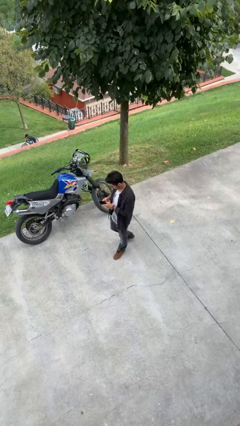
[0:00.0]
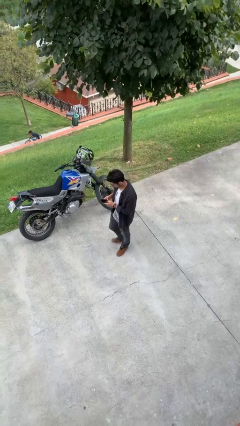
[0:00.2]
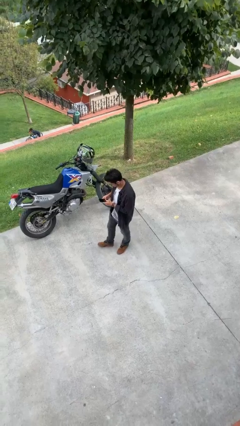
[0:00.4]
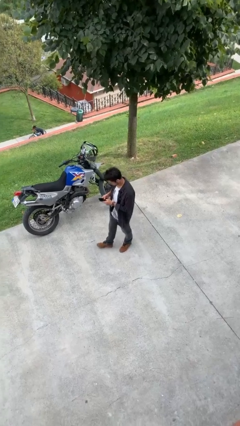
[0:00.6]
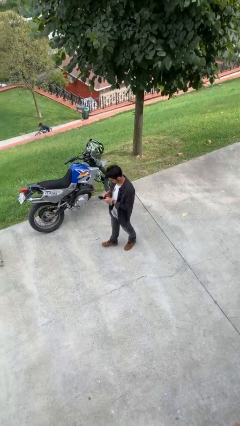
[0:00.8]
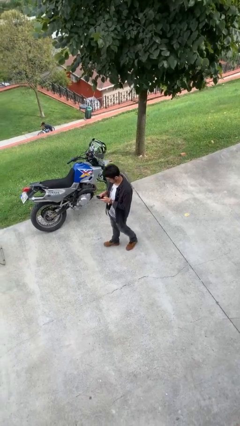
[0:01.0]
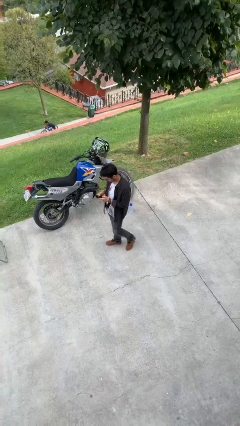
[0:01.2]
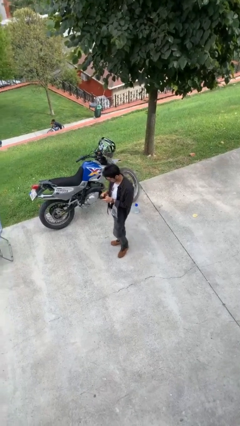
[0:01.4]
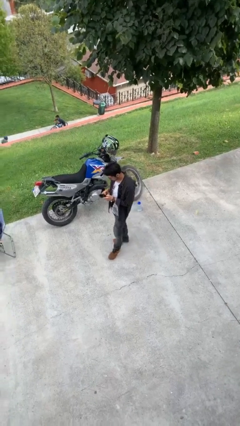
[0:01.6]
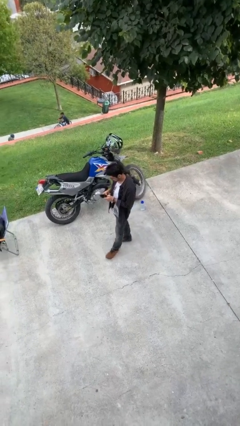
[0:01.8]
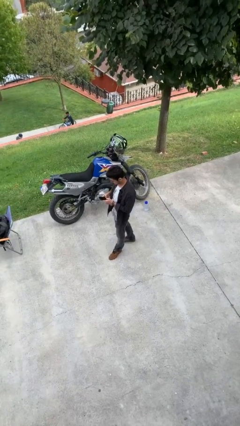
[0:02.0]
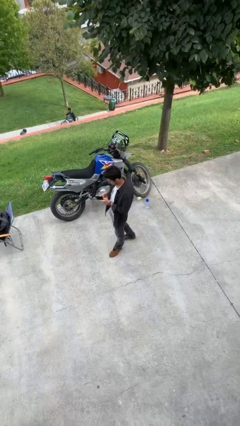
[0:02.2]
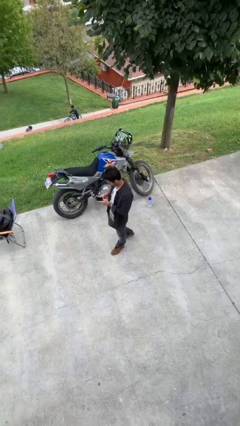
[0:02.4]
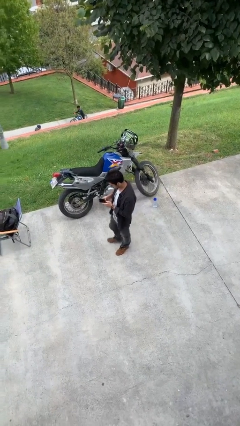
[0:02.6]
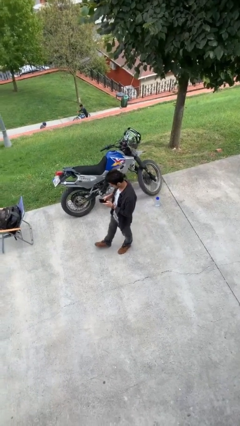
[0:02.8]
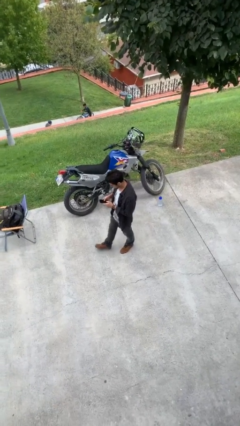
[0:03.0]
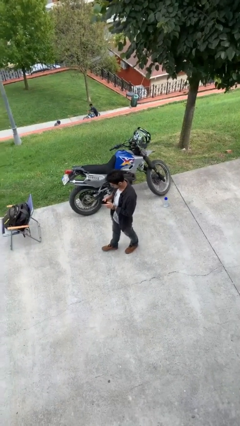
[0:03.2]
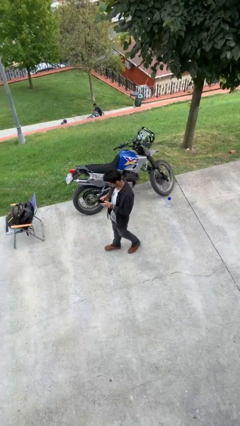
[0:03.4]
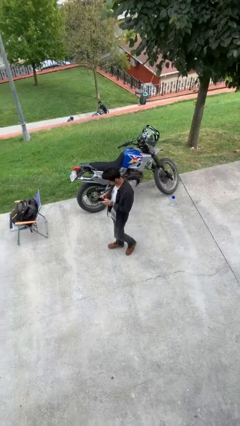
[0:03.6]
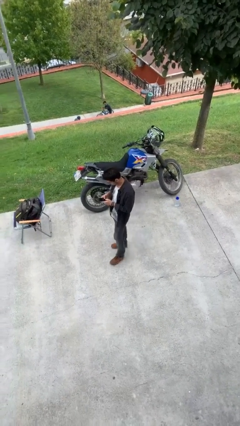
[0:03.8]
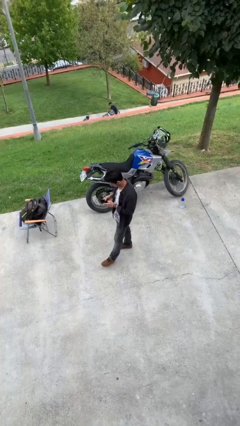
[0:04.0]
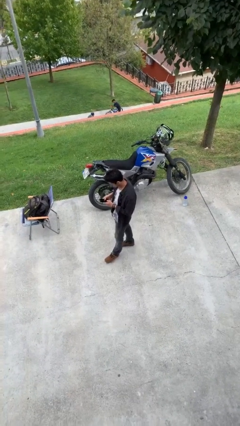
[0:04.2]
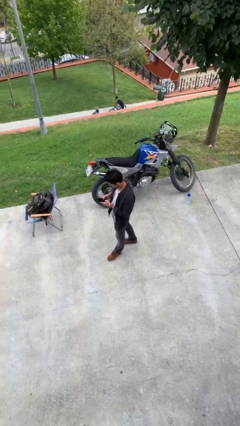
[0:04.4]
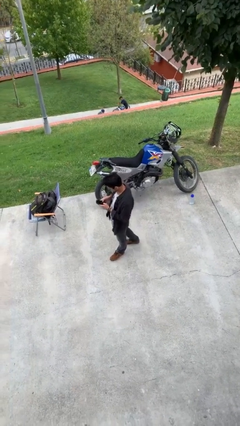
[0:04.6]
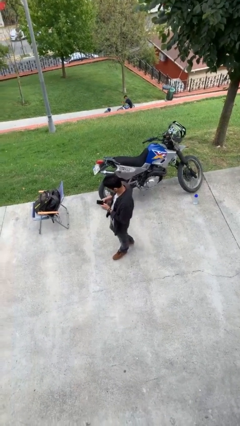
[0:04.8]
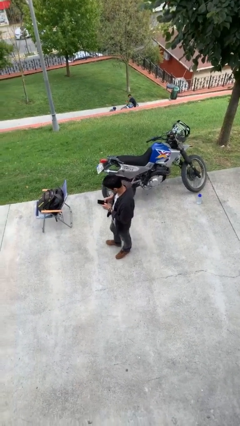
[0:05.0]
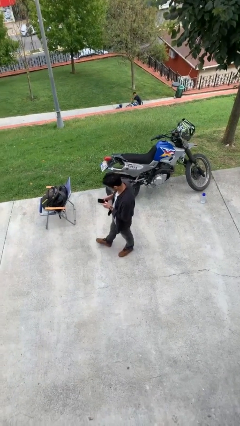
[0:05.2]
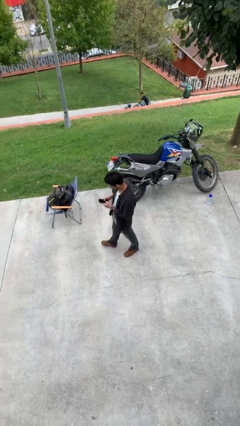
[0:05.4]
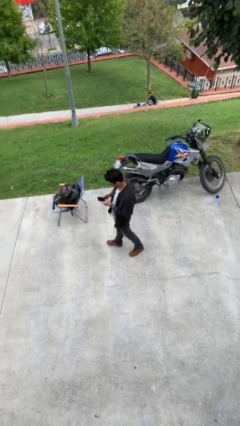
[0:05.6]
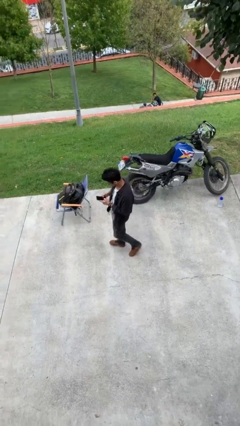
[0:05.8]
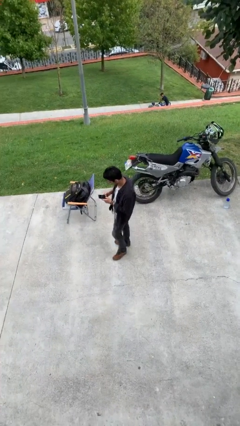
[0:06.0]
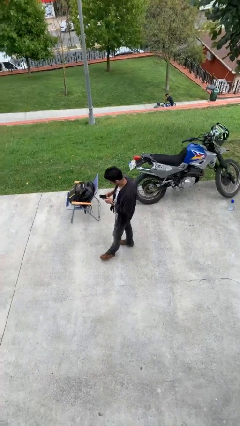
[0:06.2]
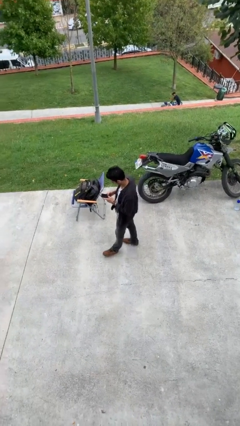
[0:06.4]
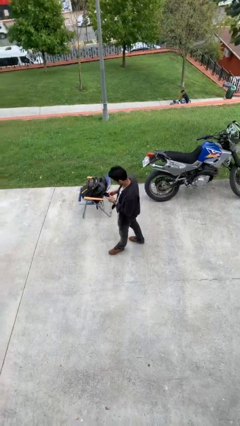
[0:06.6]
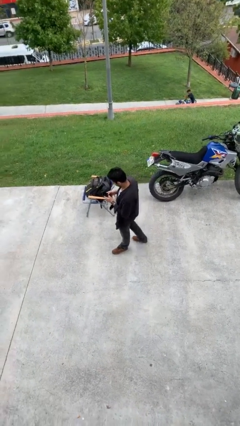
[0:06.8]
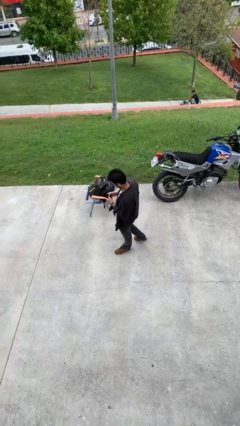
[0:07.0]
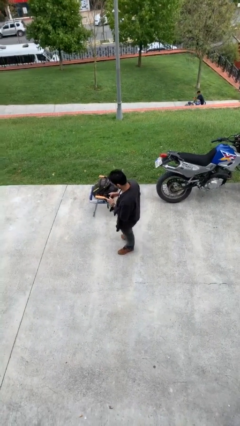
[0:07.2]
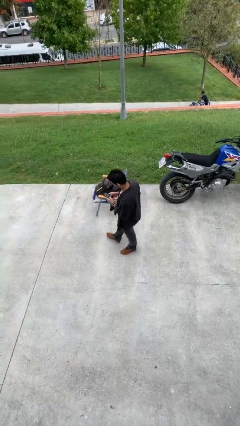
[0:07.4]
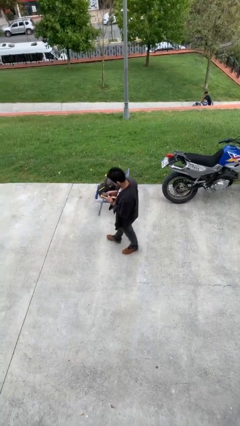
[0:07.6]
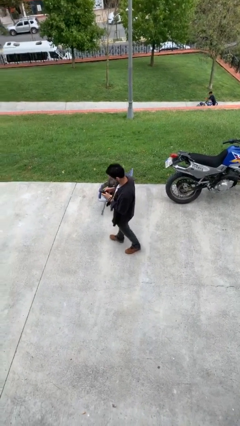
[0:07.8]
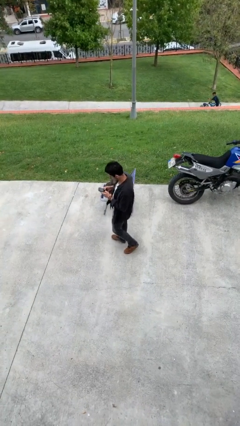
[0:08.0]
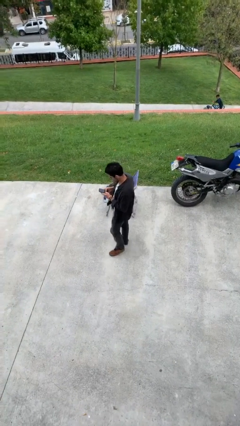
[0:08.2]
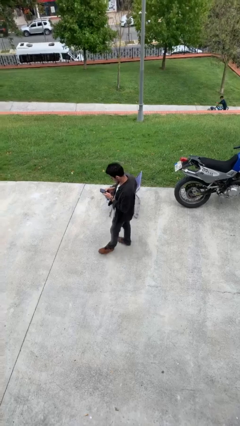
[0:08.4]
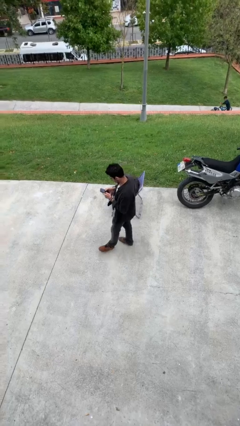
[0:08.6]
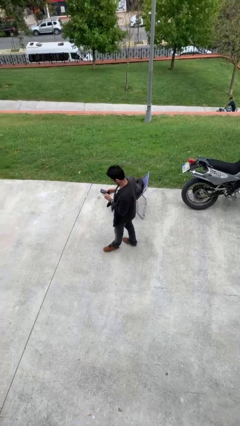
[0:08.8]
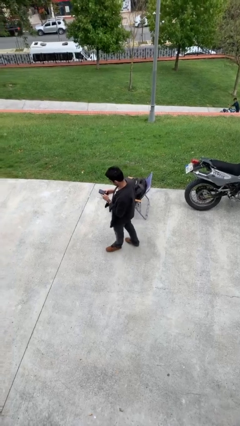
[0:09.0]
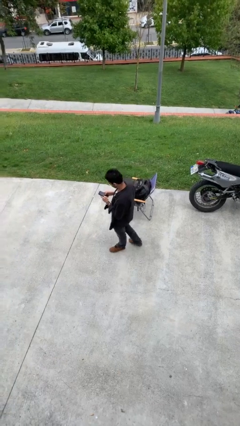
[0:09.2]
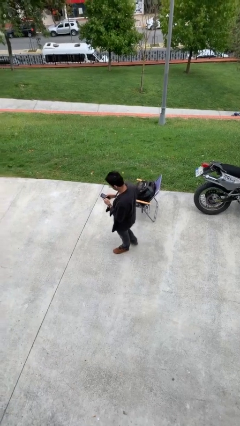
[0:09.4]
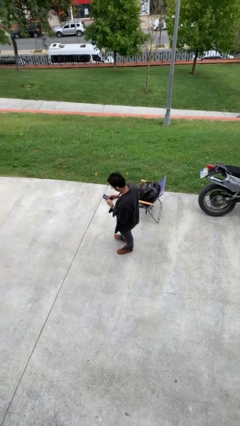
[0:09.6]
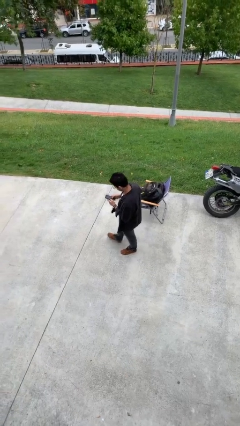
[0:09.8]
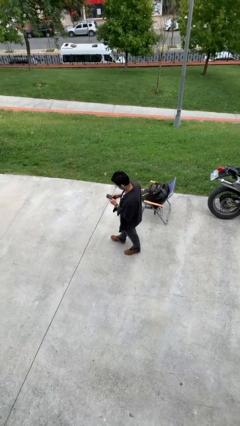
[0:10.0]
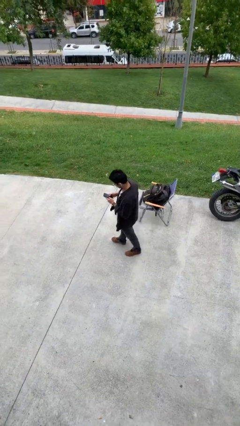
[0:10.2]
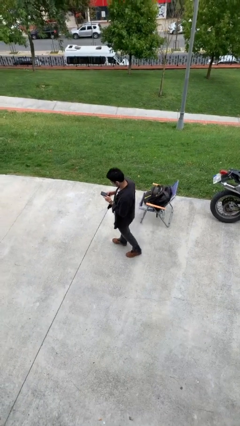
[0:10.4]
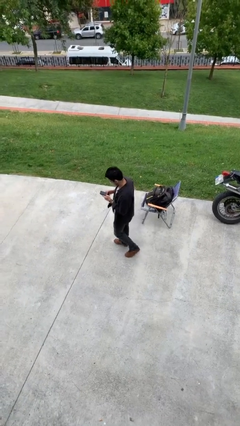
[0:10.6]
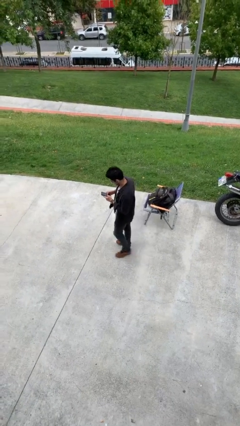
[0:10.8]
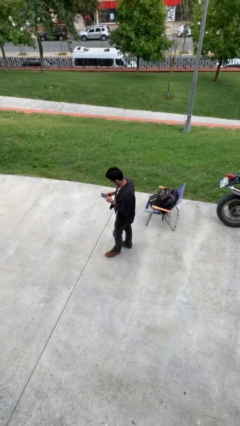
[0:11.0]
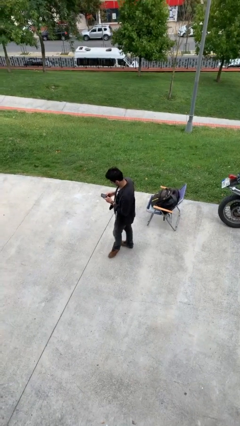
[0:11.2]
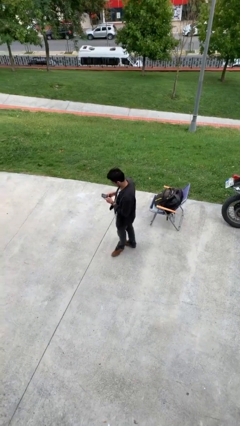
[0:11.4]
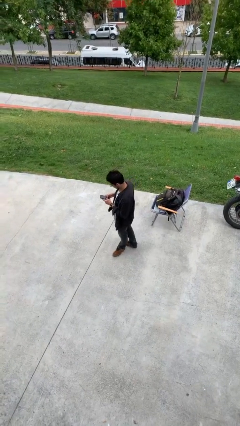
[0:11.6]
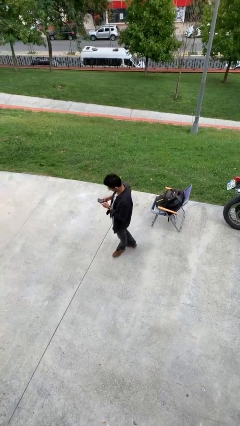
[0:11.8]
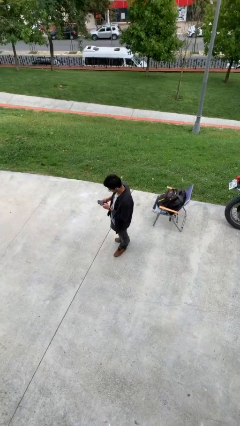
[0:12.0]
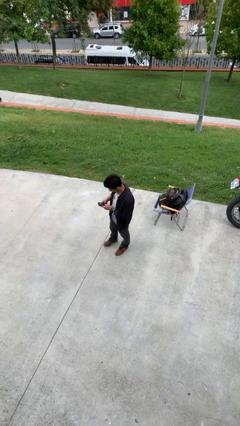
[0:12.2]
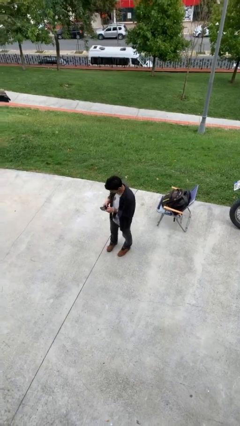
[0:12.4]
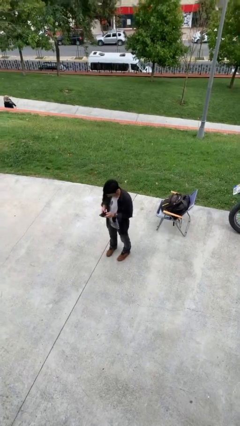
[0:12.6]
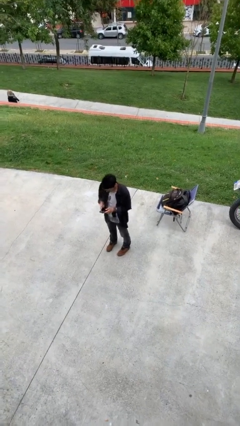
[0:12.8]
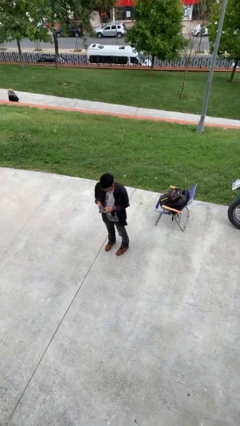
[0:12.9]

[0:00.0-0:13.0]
person texts on phone

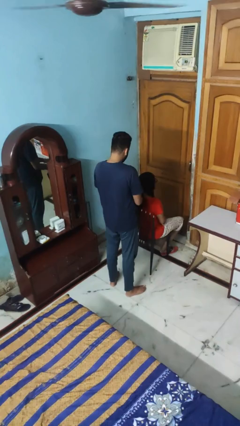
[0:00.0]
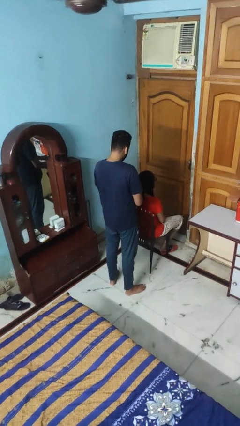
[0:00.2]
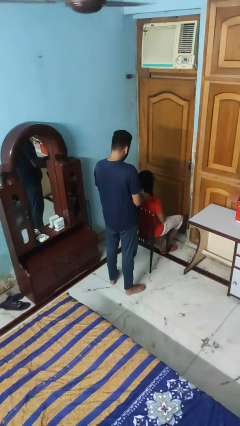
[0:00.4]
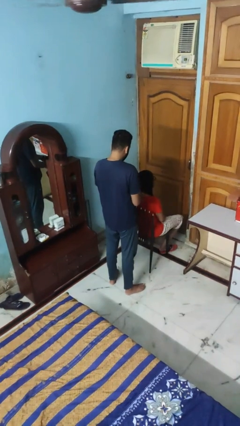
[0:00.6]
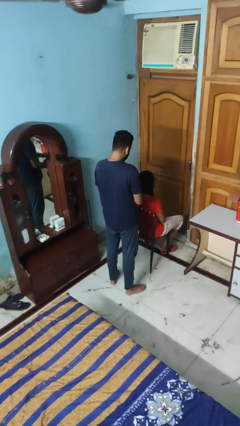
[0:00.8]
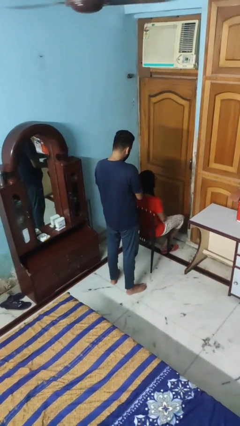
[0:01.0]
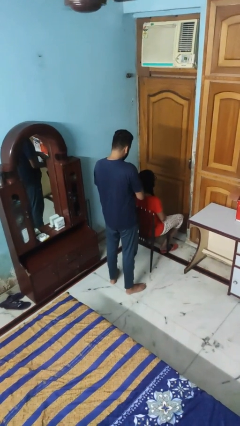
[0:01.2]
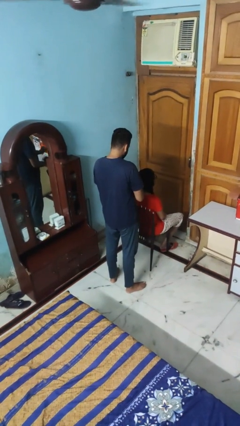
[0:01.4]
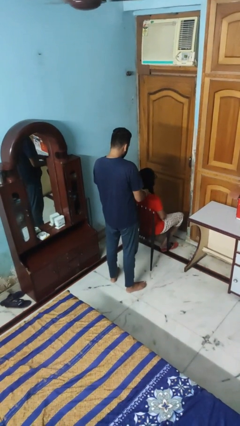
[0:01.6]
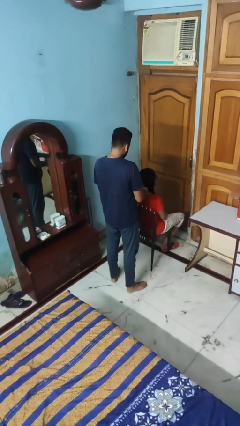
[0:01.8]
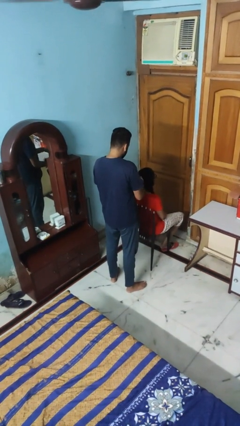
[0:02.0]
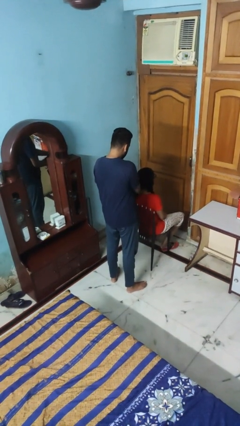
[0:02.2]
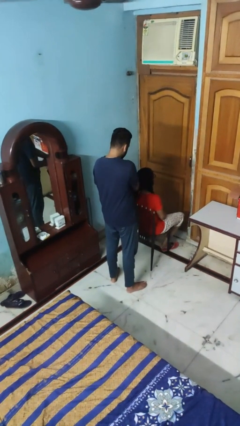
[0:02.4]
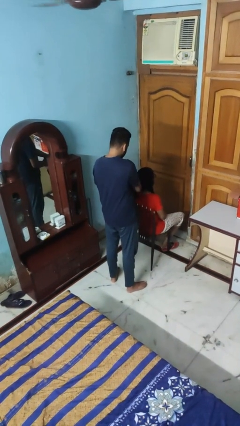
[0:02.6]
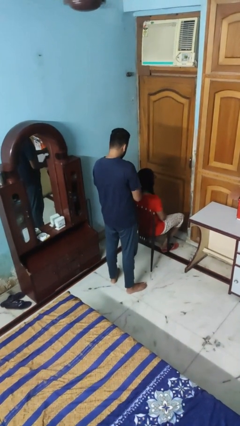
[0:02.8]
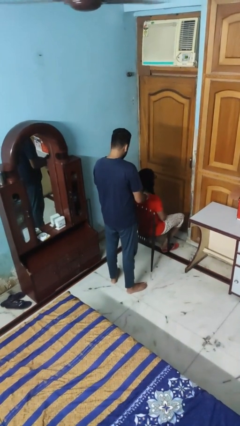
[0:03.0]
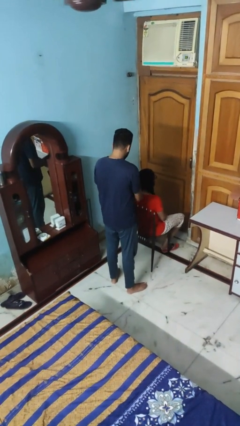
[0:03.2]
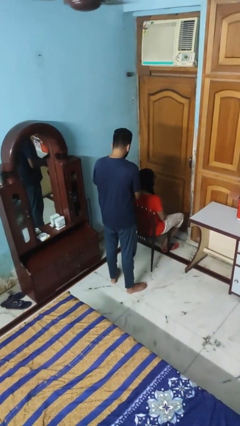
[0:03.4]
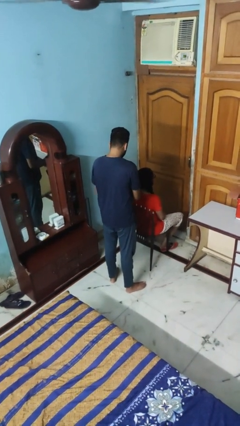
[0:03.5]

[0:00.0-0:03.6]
person braids hair of person

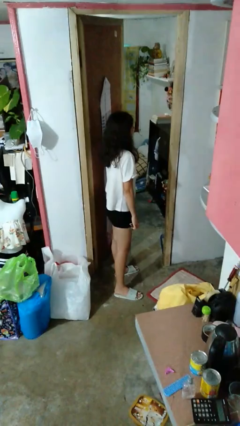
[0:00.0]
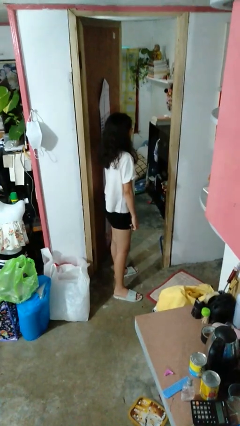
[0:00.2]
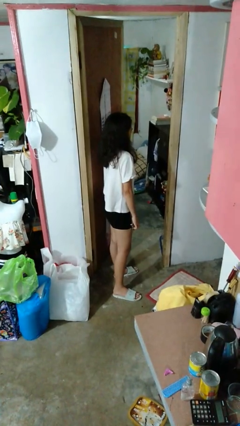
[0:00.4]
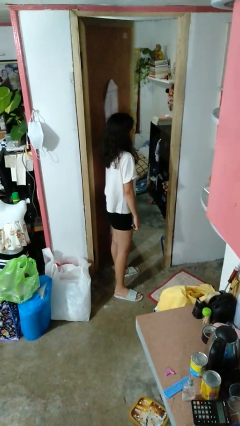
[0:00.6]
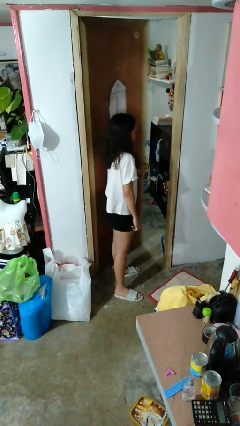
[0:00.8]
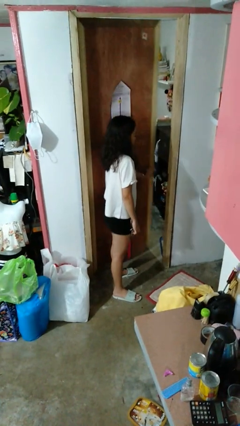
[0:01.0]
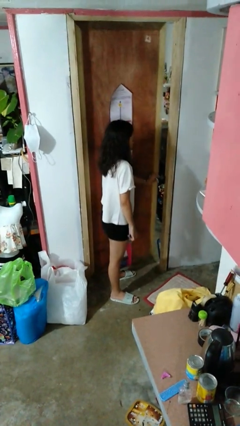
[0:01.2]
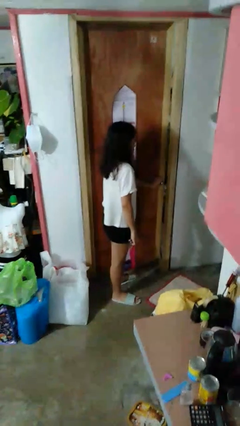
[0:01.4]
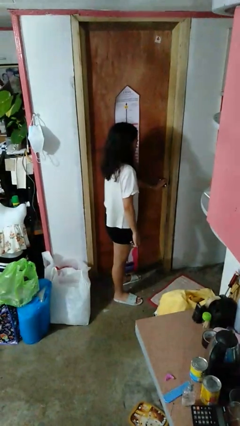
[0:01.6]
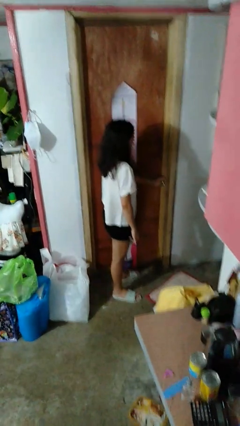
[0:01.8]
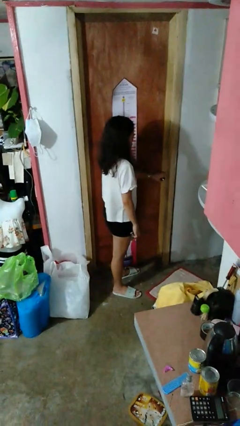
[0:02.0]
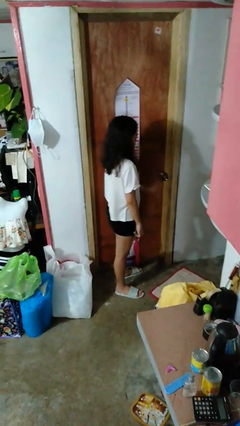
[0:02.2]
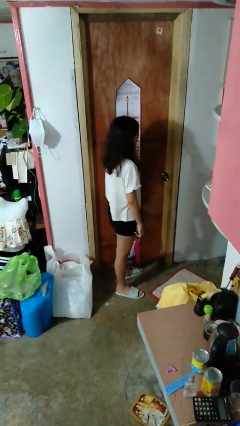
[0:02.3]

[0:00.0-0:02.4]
person closes facility door
